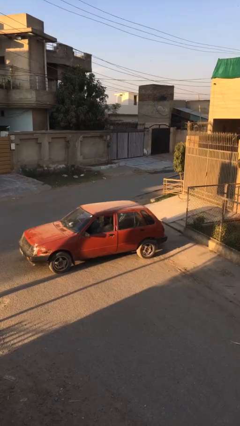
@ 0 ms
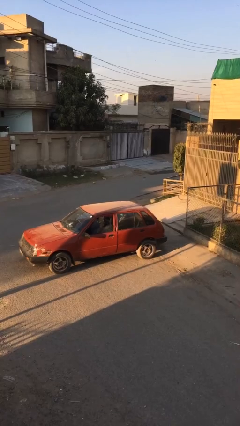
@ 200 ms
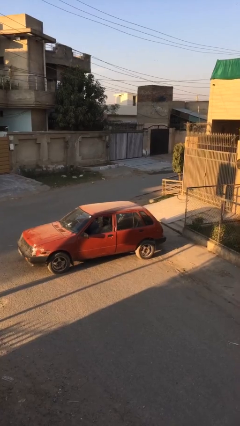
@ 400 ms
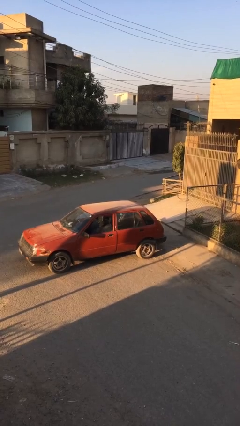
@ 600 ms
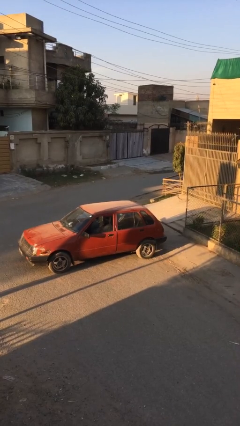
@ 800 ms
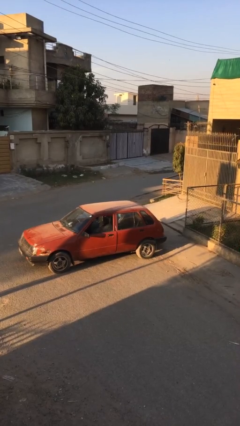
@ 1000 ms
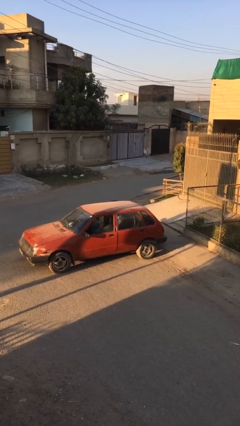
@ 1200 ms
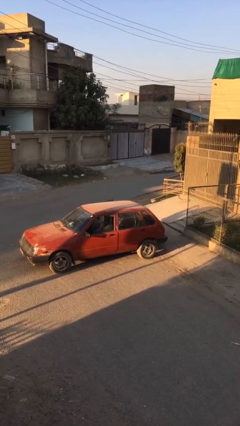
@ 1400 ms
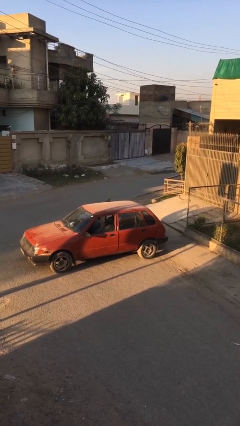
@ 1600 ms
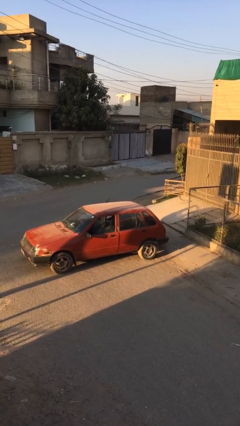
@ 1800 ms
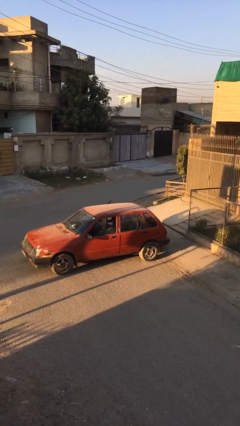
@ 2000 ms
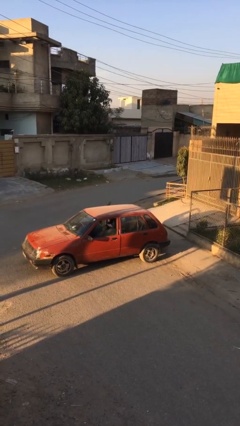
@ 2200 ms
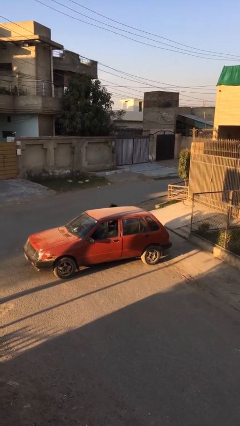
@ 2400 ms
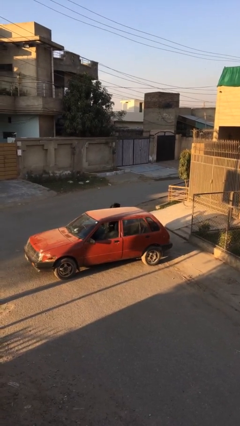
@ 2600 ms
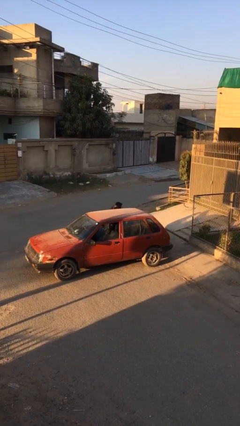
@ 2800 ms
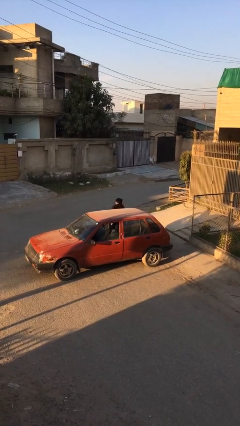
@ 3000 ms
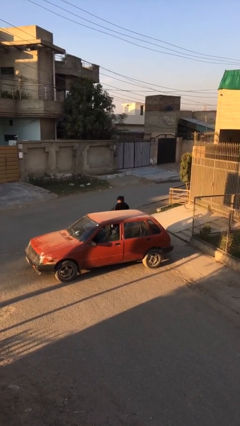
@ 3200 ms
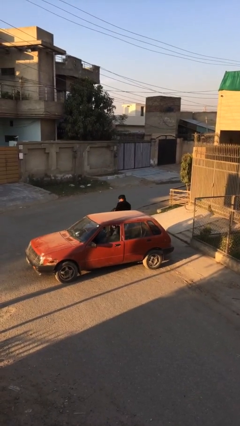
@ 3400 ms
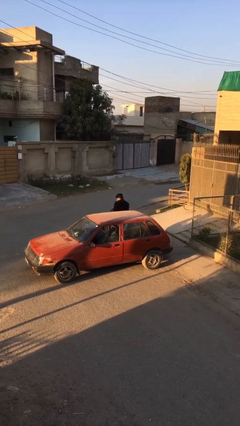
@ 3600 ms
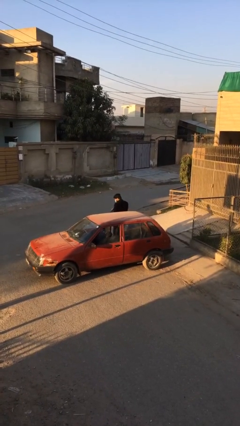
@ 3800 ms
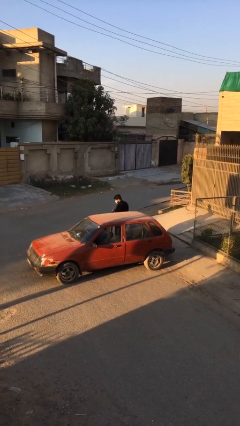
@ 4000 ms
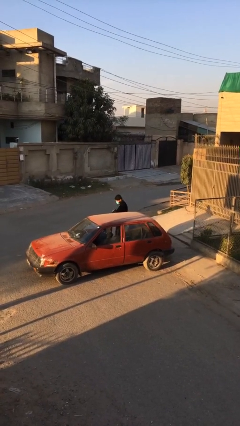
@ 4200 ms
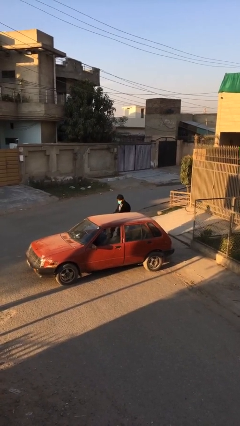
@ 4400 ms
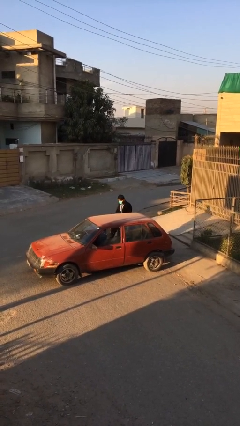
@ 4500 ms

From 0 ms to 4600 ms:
person exits car

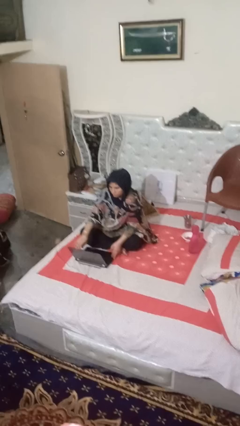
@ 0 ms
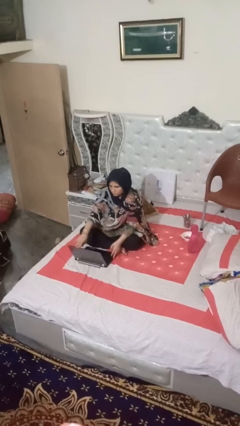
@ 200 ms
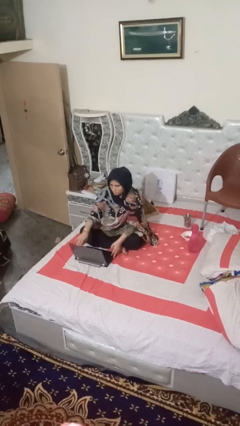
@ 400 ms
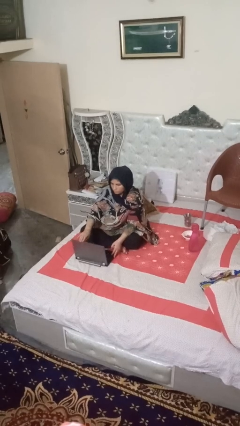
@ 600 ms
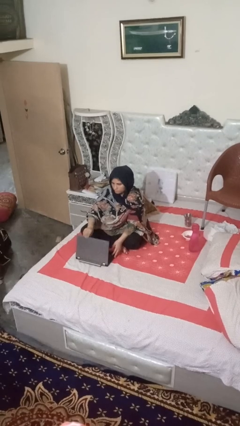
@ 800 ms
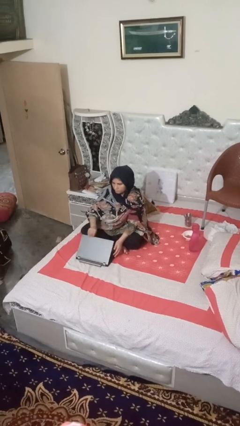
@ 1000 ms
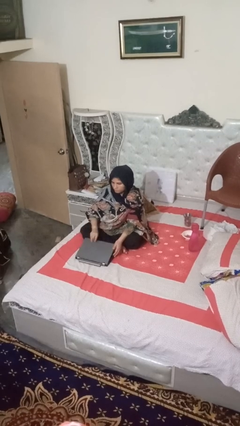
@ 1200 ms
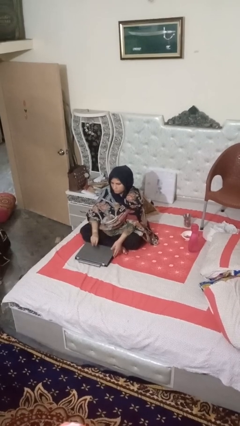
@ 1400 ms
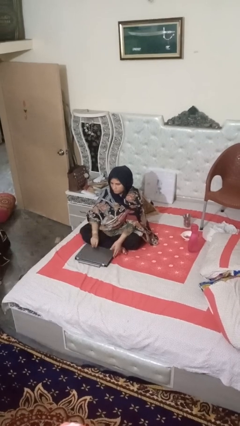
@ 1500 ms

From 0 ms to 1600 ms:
person closes laptop

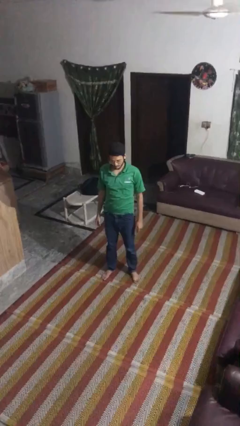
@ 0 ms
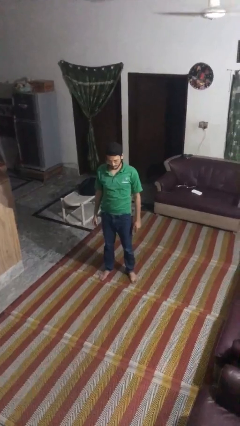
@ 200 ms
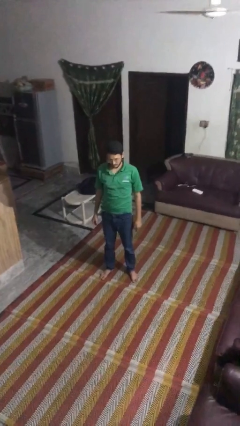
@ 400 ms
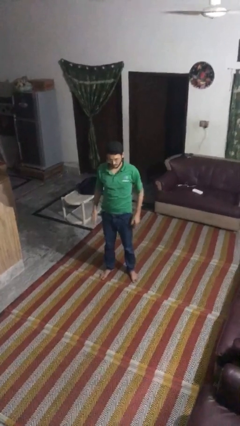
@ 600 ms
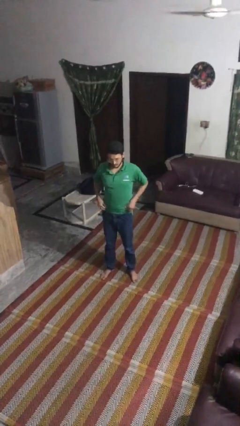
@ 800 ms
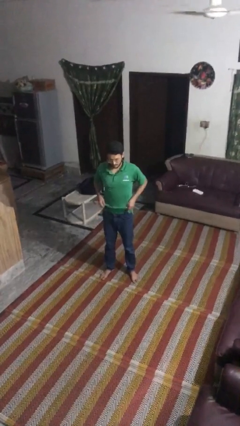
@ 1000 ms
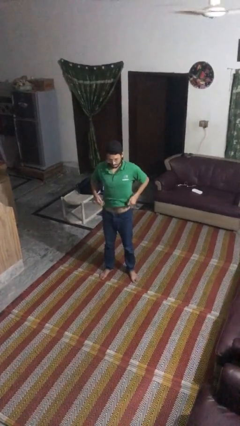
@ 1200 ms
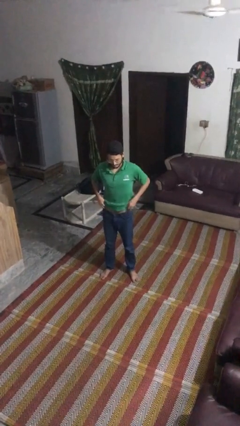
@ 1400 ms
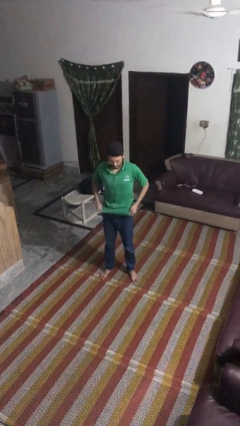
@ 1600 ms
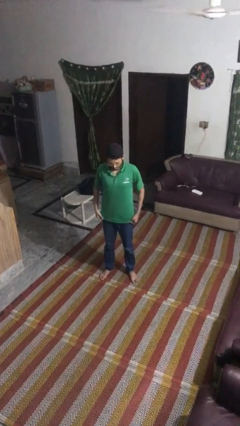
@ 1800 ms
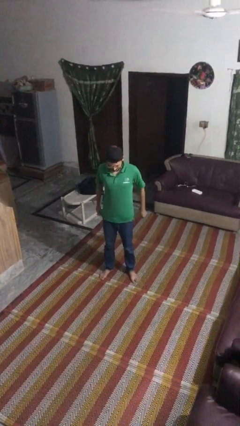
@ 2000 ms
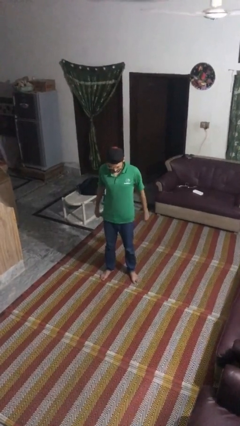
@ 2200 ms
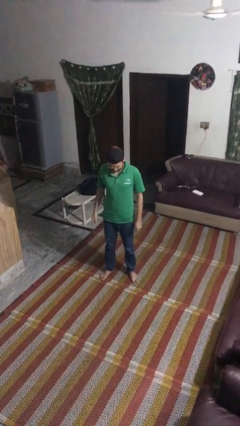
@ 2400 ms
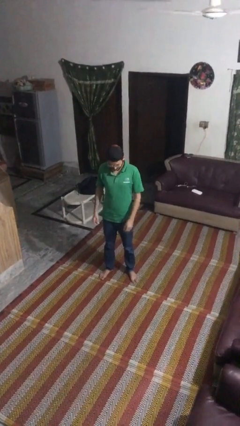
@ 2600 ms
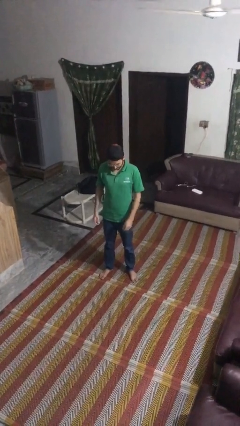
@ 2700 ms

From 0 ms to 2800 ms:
person untucks shirt

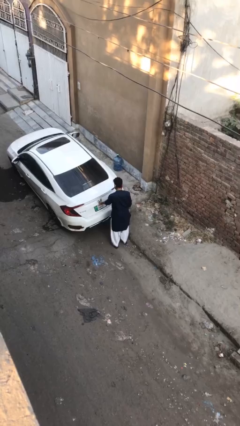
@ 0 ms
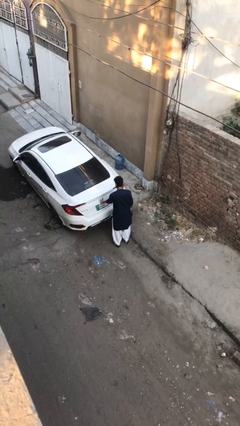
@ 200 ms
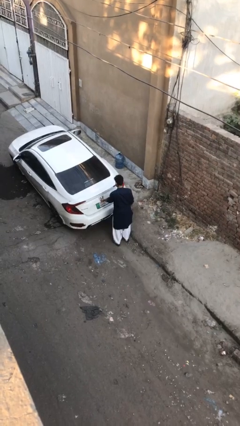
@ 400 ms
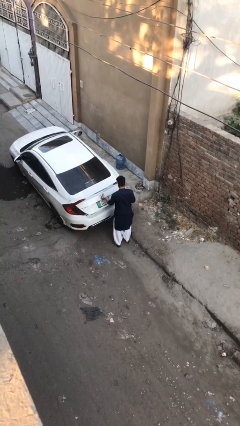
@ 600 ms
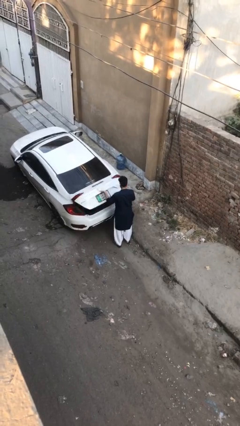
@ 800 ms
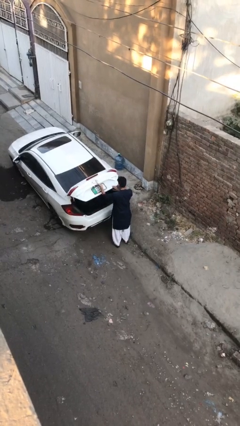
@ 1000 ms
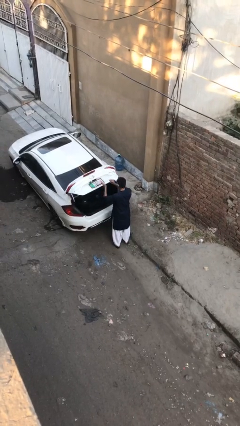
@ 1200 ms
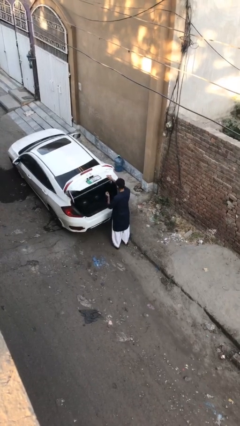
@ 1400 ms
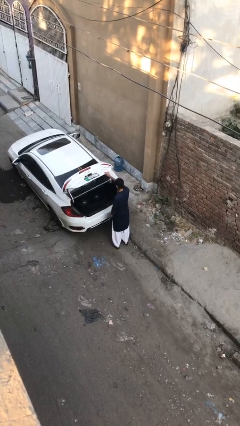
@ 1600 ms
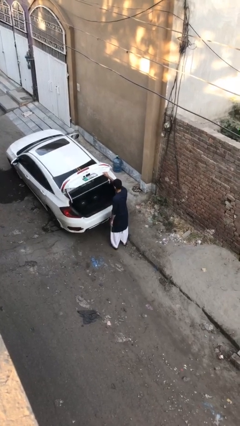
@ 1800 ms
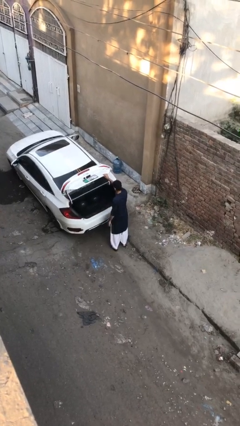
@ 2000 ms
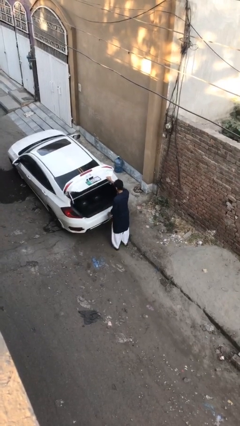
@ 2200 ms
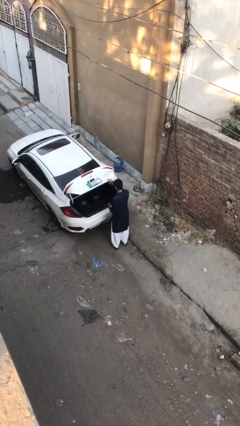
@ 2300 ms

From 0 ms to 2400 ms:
person opens car trunk

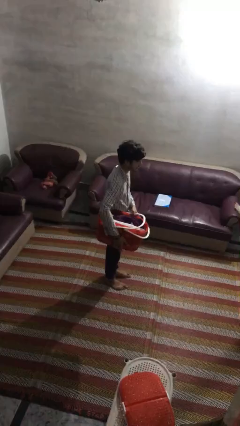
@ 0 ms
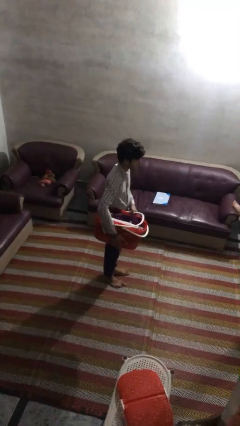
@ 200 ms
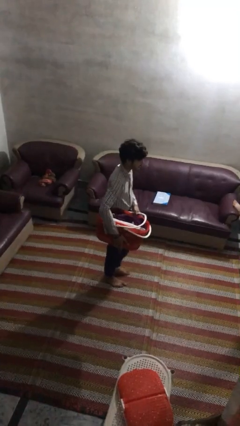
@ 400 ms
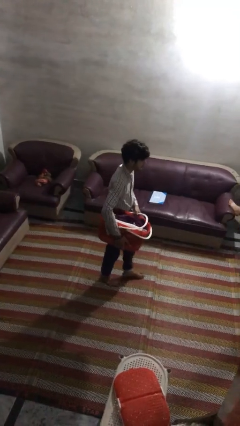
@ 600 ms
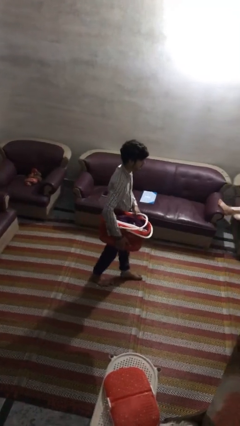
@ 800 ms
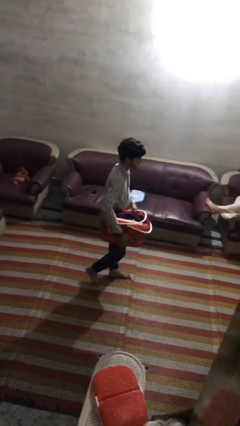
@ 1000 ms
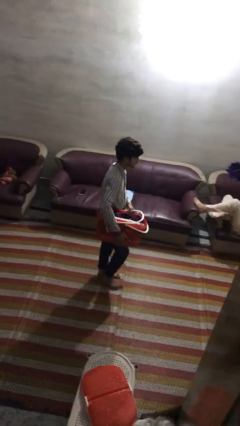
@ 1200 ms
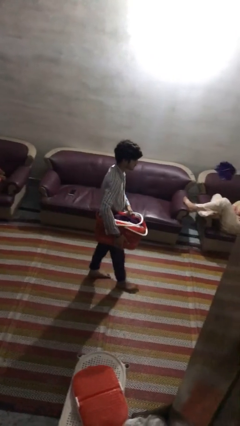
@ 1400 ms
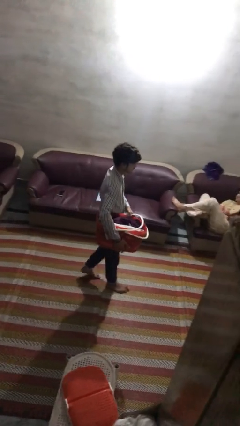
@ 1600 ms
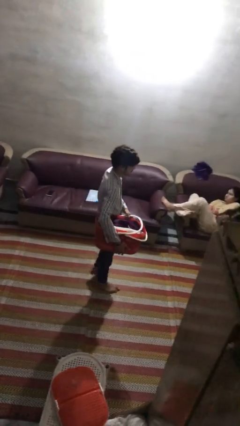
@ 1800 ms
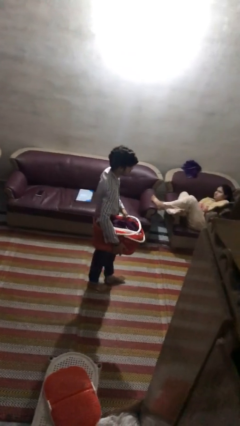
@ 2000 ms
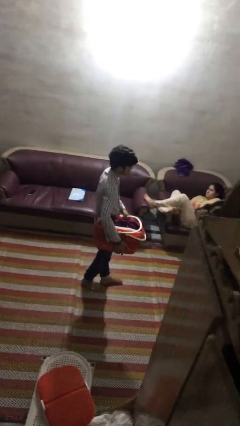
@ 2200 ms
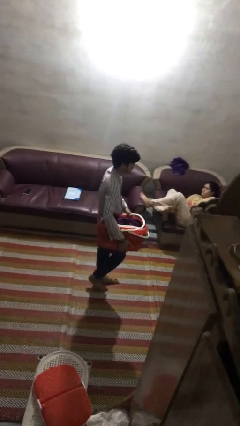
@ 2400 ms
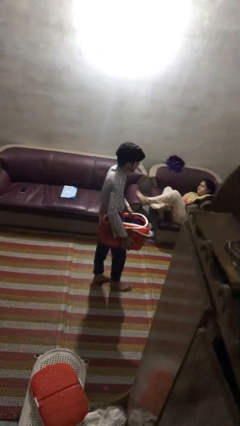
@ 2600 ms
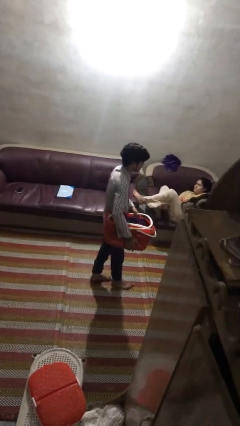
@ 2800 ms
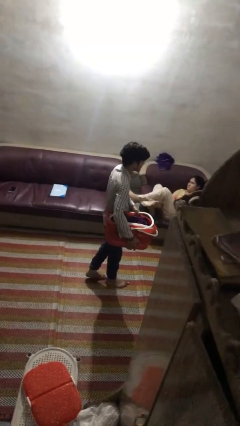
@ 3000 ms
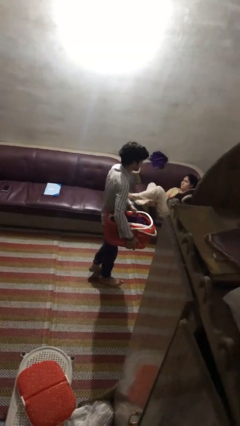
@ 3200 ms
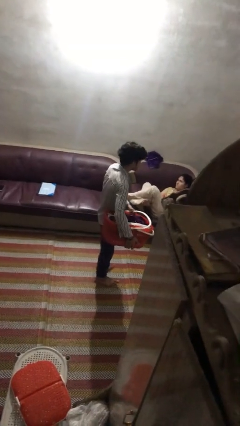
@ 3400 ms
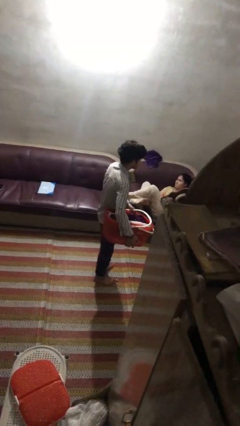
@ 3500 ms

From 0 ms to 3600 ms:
person carries laundry basket

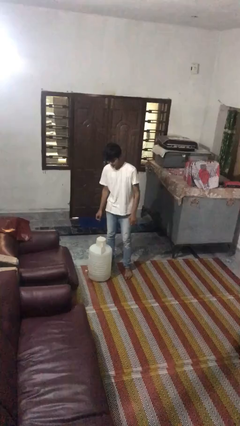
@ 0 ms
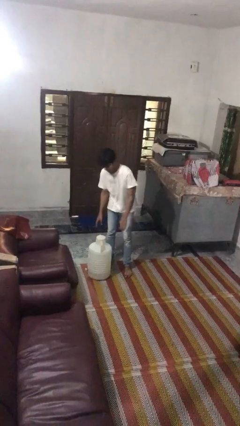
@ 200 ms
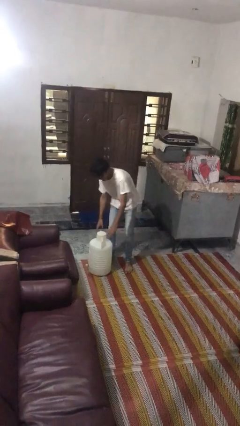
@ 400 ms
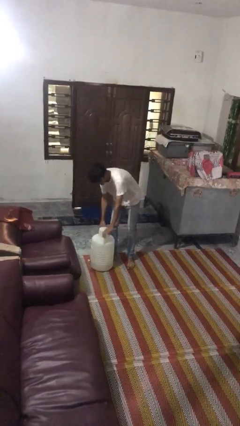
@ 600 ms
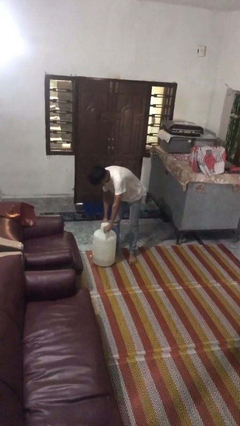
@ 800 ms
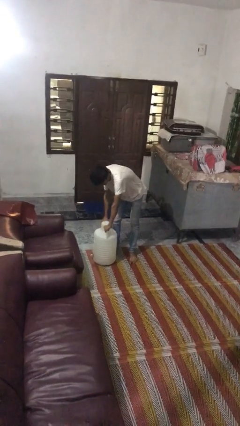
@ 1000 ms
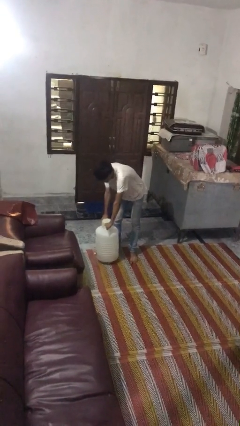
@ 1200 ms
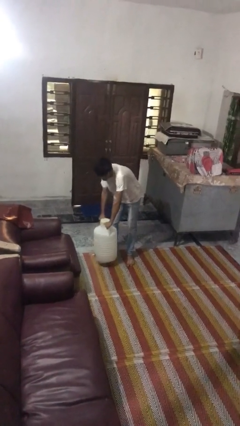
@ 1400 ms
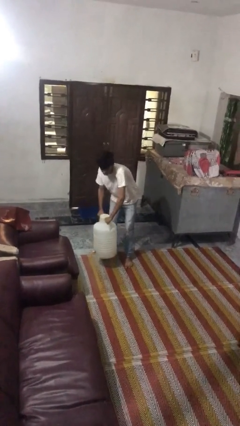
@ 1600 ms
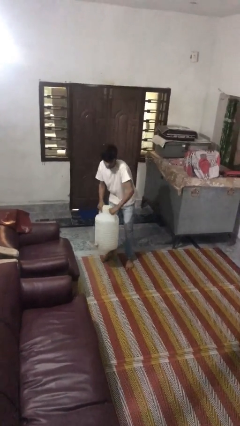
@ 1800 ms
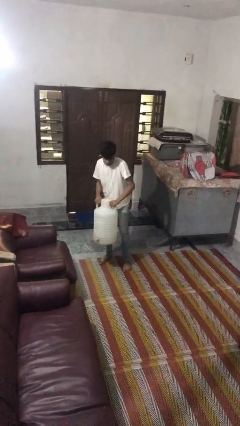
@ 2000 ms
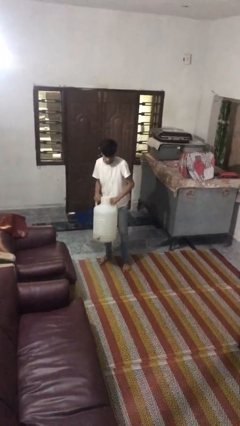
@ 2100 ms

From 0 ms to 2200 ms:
person picks up object from floor
